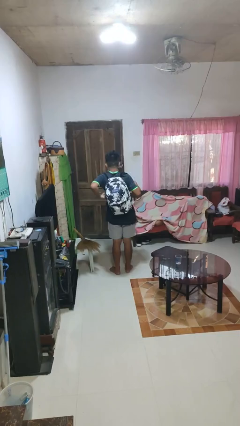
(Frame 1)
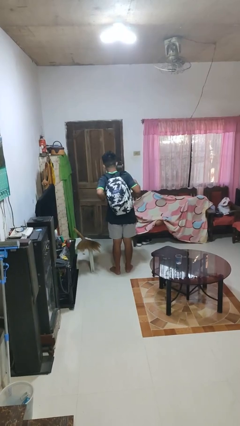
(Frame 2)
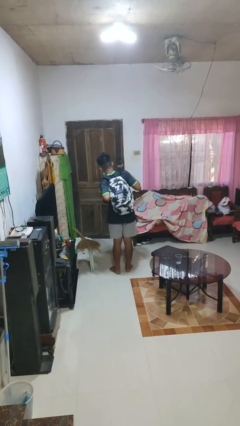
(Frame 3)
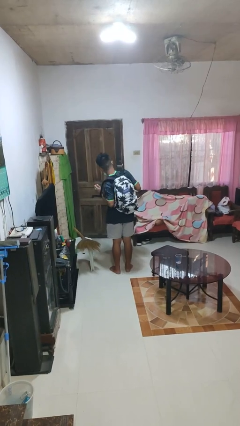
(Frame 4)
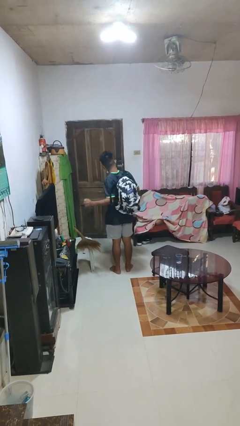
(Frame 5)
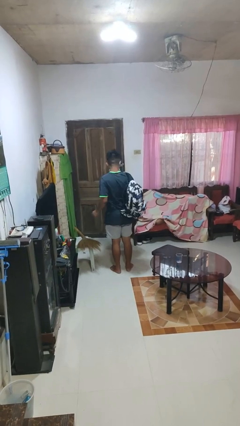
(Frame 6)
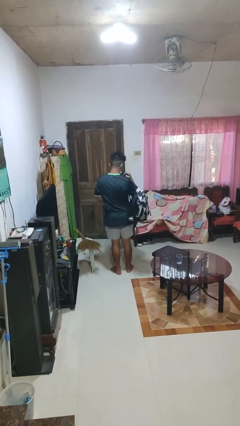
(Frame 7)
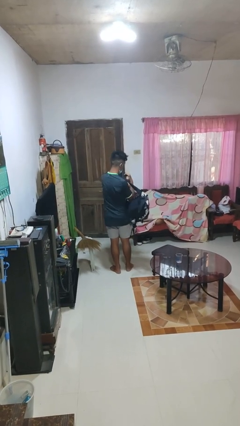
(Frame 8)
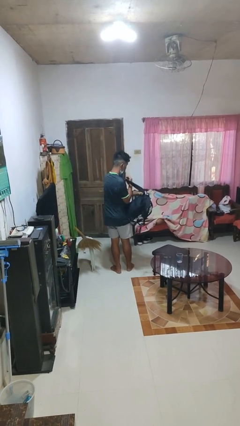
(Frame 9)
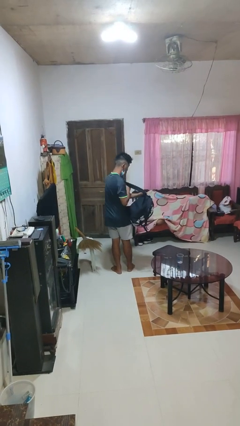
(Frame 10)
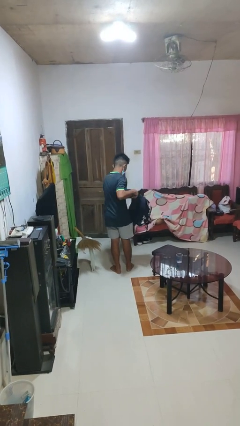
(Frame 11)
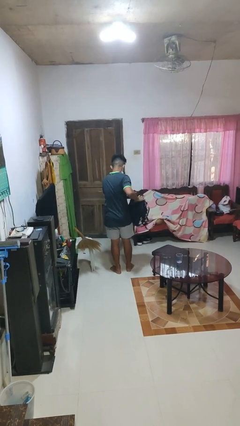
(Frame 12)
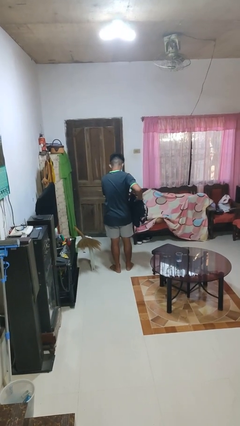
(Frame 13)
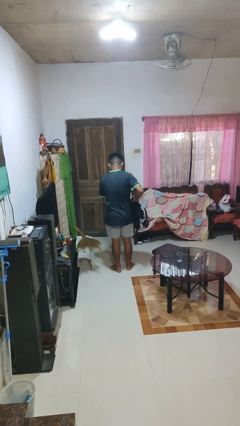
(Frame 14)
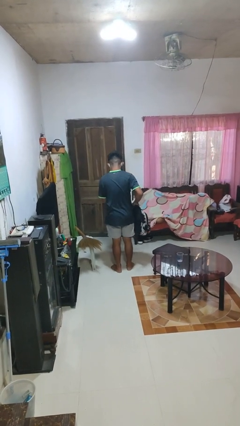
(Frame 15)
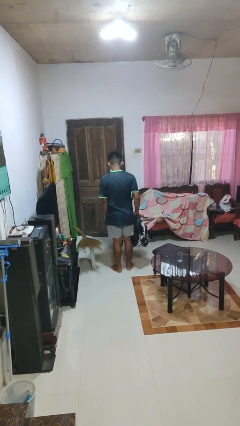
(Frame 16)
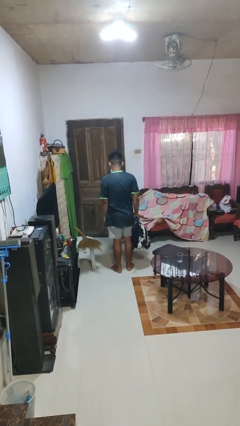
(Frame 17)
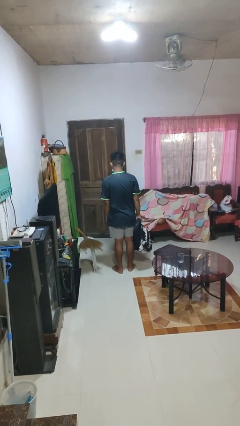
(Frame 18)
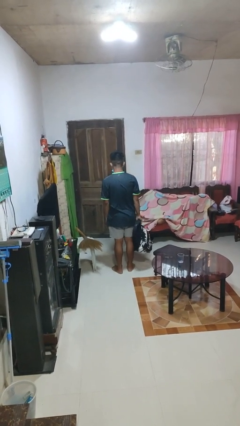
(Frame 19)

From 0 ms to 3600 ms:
person takes off backpack

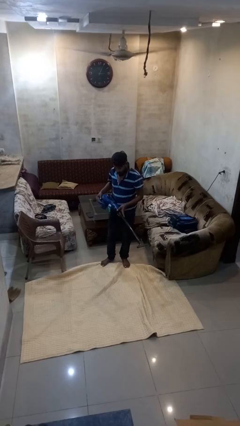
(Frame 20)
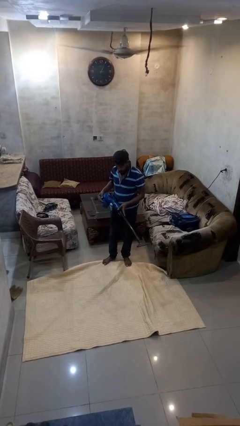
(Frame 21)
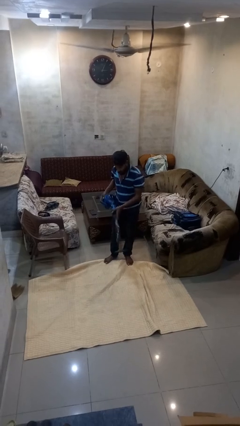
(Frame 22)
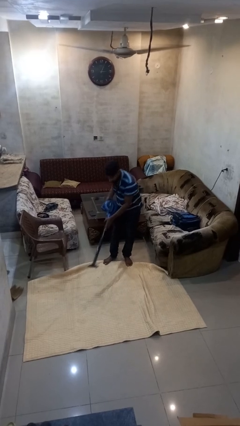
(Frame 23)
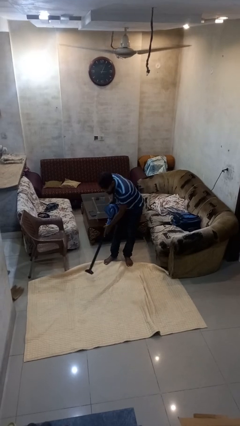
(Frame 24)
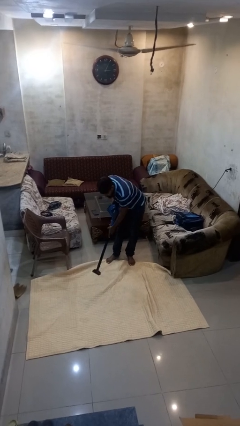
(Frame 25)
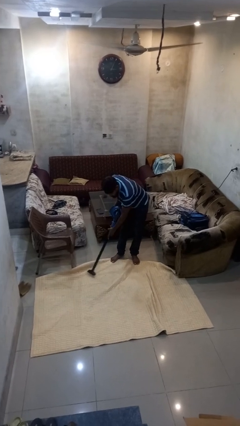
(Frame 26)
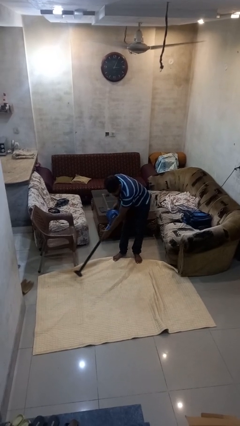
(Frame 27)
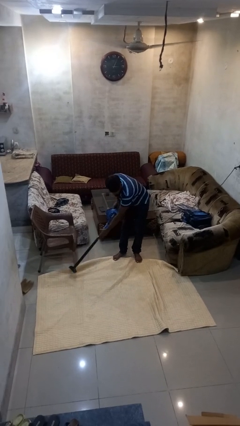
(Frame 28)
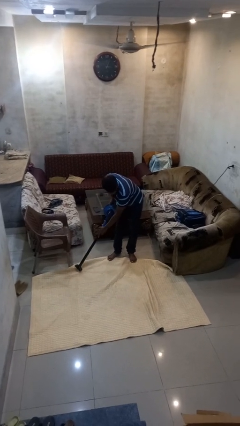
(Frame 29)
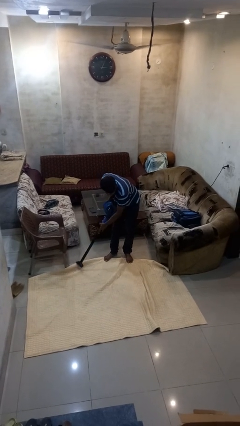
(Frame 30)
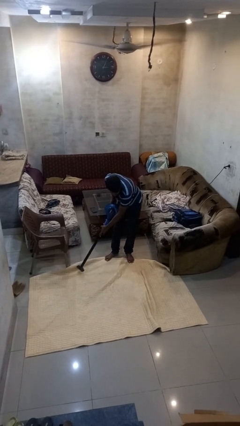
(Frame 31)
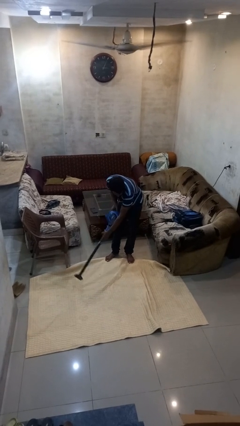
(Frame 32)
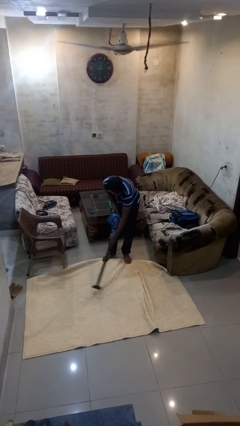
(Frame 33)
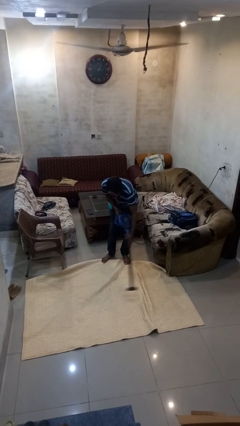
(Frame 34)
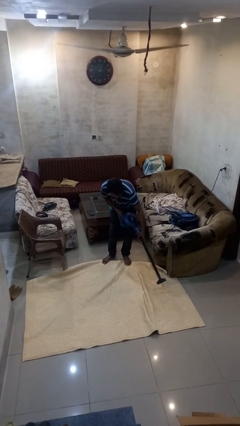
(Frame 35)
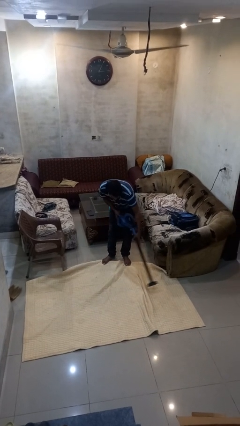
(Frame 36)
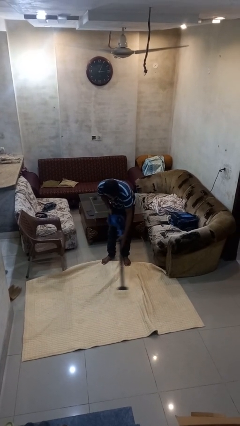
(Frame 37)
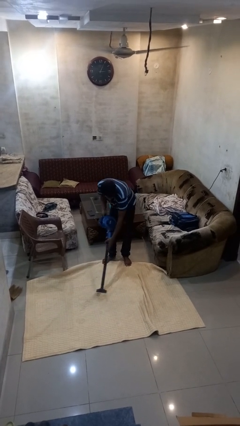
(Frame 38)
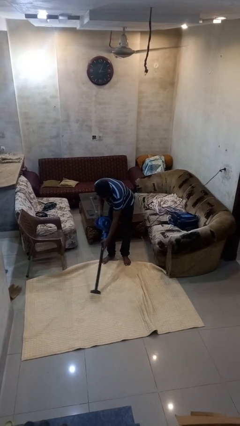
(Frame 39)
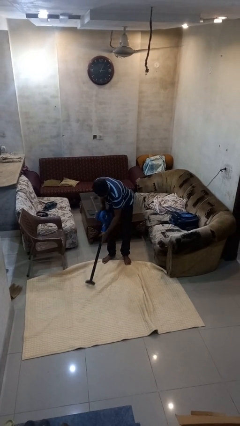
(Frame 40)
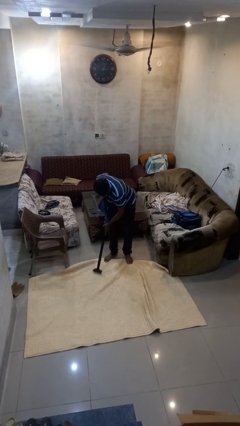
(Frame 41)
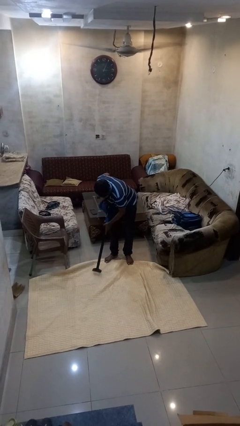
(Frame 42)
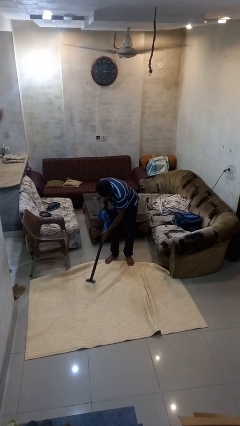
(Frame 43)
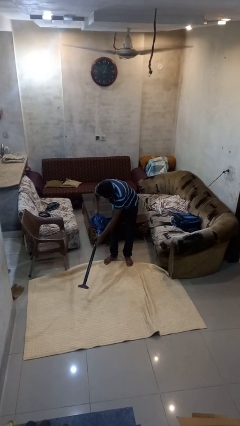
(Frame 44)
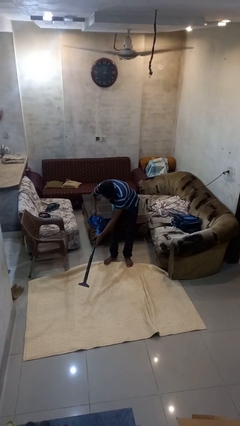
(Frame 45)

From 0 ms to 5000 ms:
person vacuums carpet

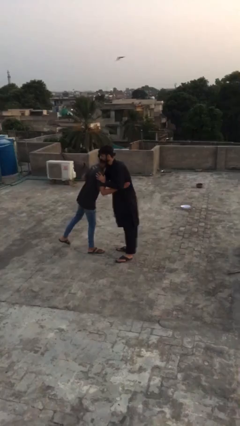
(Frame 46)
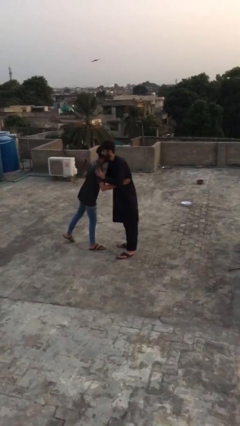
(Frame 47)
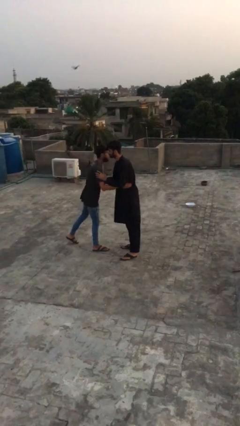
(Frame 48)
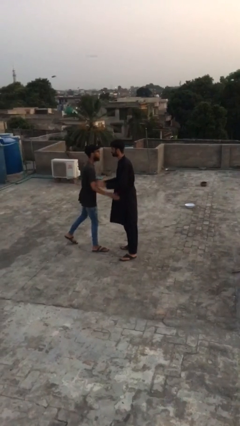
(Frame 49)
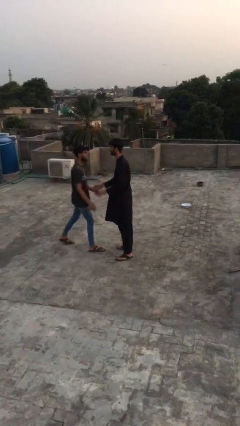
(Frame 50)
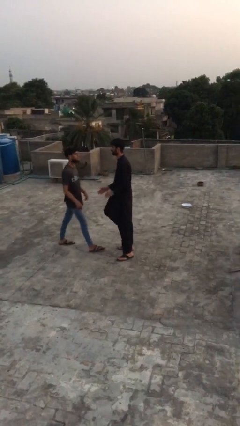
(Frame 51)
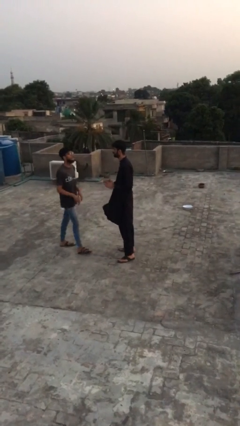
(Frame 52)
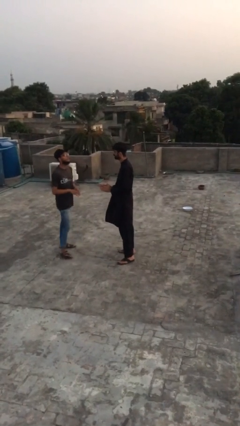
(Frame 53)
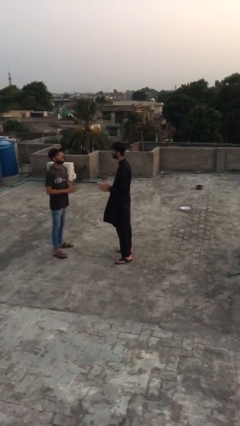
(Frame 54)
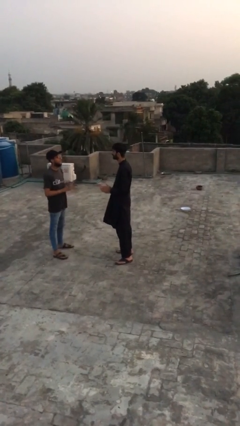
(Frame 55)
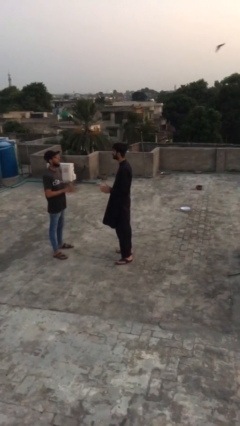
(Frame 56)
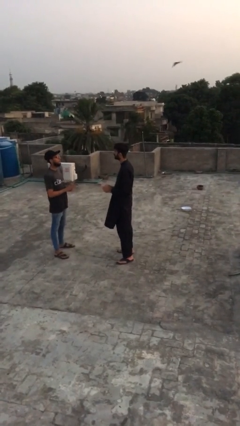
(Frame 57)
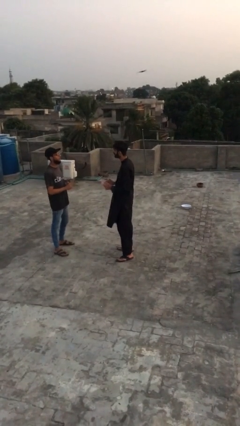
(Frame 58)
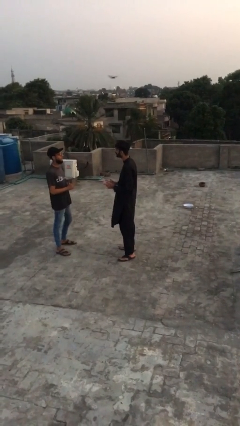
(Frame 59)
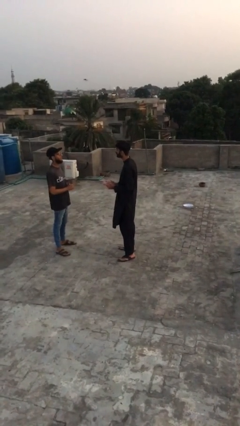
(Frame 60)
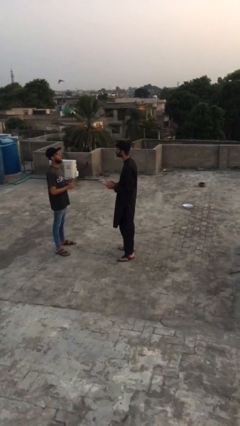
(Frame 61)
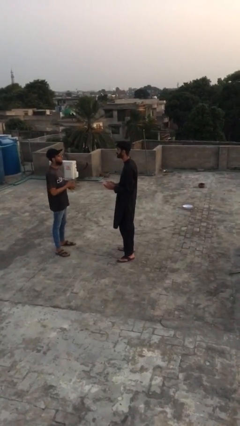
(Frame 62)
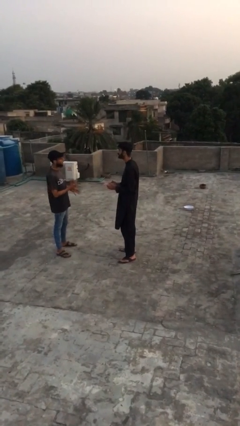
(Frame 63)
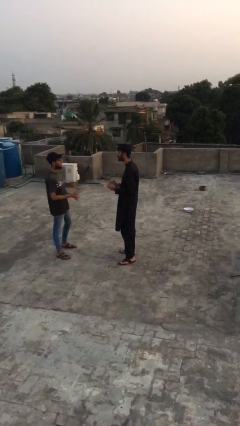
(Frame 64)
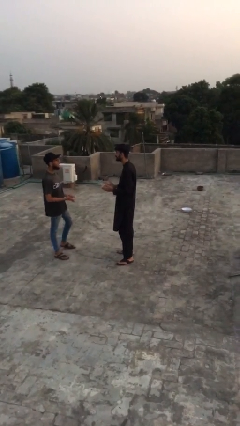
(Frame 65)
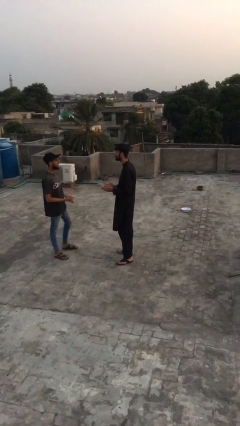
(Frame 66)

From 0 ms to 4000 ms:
person talks to person

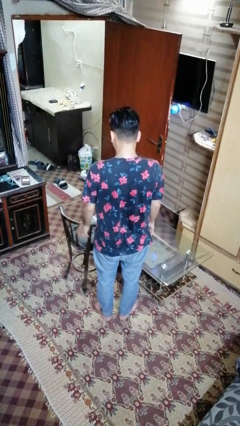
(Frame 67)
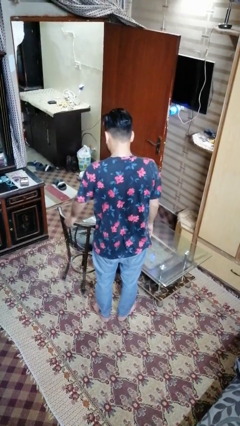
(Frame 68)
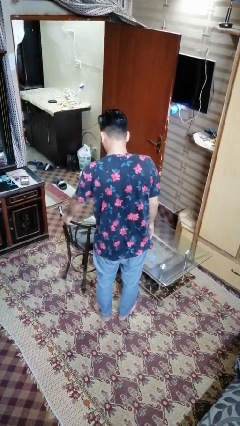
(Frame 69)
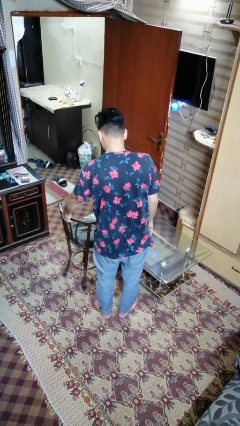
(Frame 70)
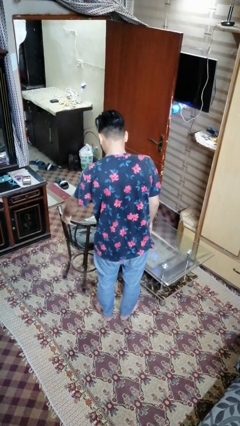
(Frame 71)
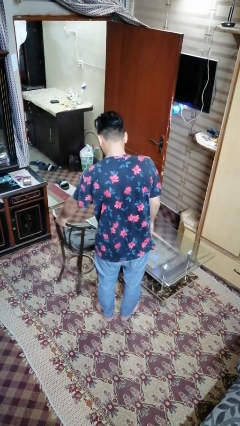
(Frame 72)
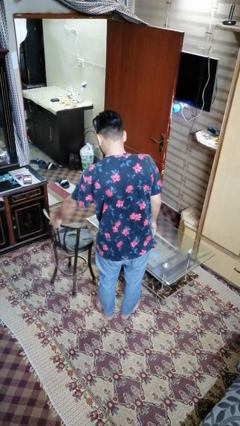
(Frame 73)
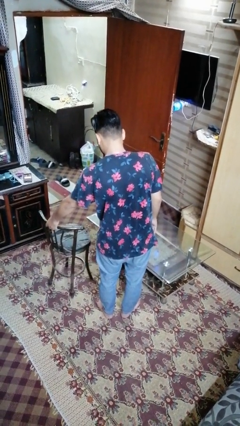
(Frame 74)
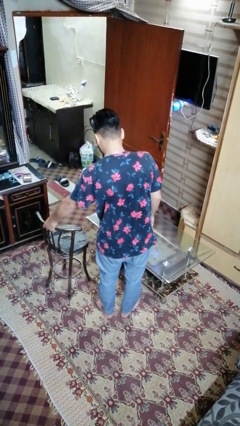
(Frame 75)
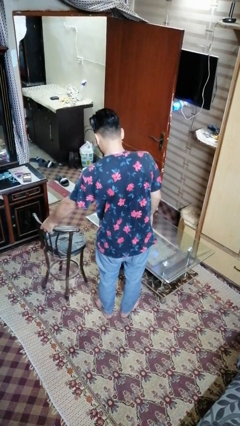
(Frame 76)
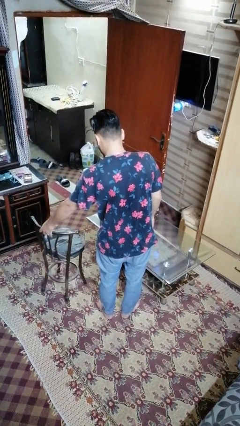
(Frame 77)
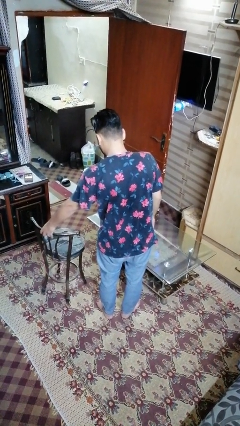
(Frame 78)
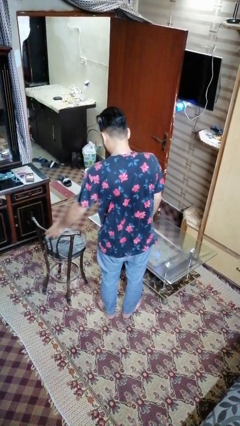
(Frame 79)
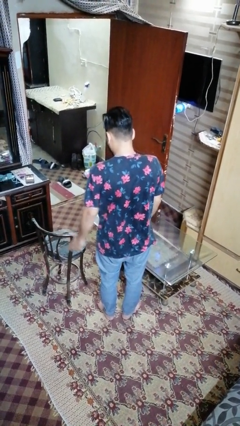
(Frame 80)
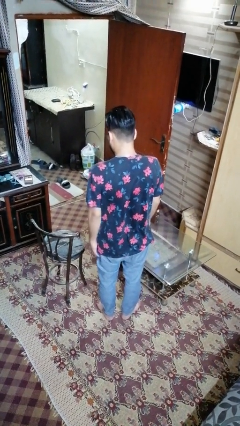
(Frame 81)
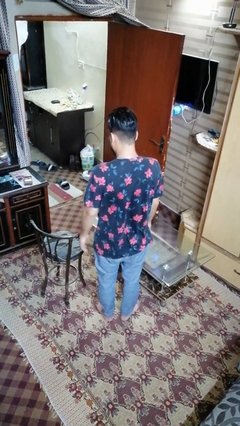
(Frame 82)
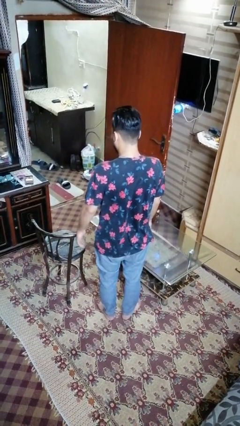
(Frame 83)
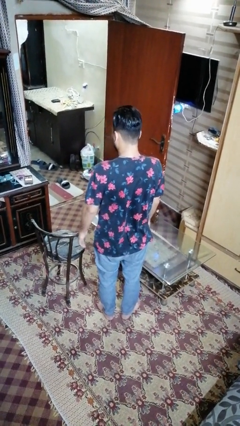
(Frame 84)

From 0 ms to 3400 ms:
person pulls out chair

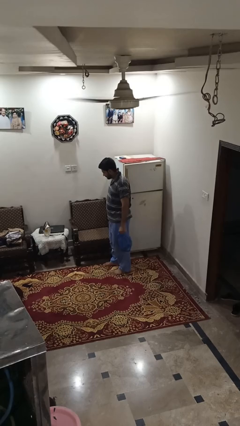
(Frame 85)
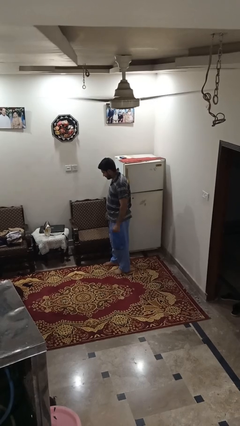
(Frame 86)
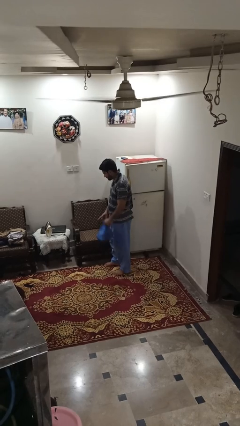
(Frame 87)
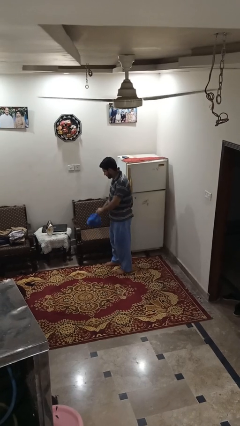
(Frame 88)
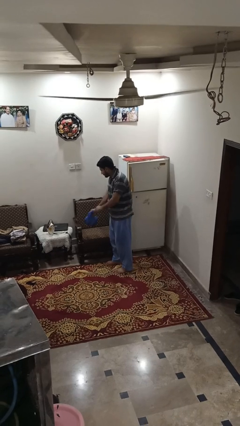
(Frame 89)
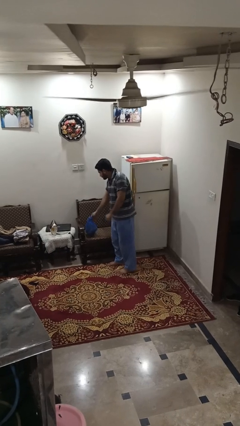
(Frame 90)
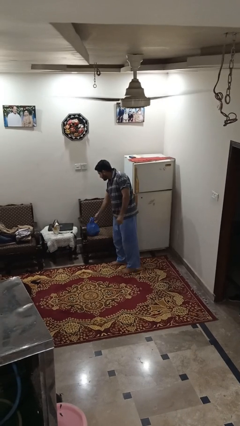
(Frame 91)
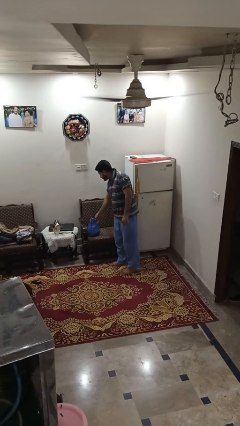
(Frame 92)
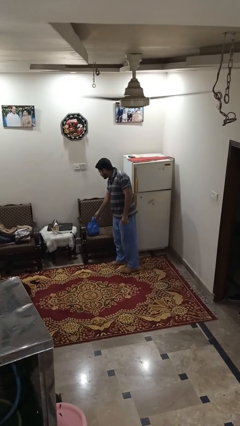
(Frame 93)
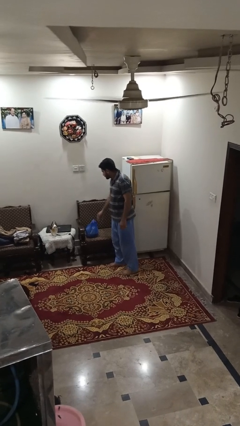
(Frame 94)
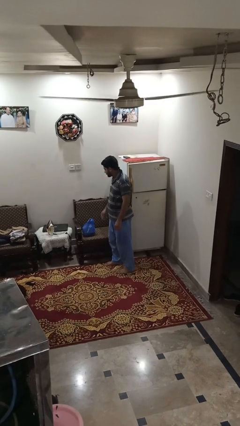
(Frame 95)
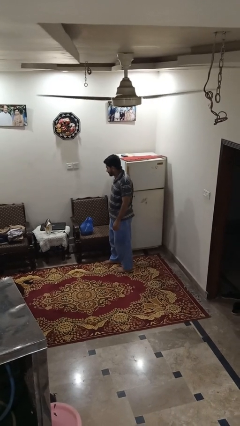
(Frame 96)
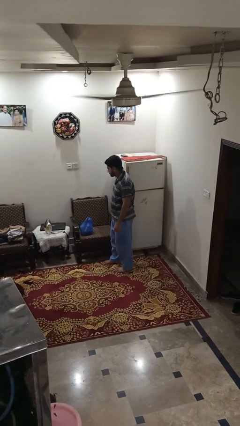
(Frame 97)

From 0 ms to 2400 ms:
person puts down object on couch
